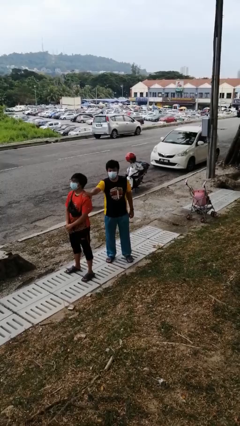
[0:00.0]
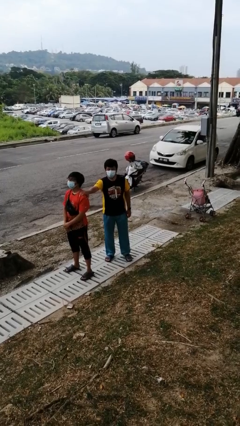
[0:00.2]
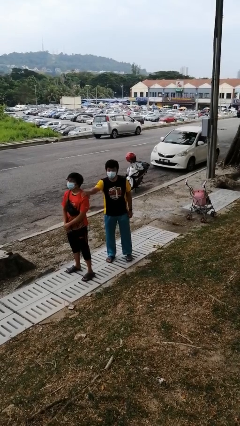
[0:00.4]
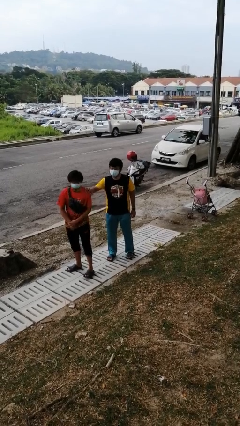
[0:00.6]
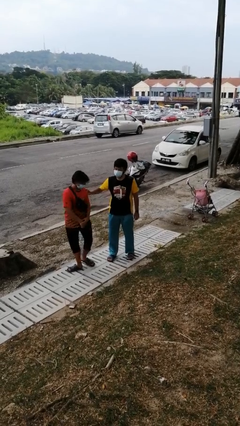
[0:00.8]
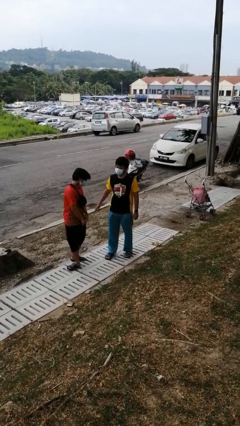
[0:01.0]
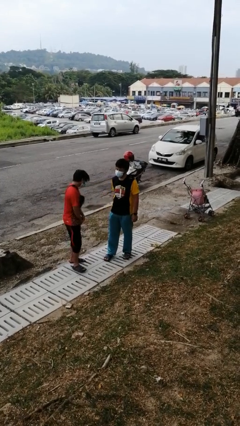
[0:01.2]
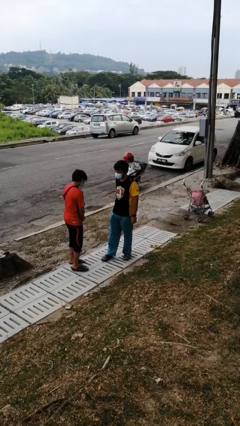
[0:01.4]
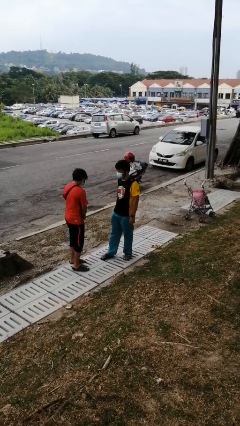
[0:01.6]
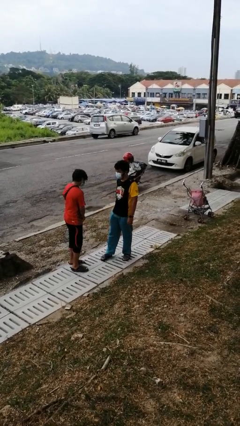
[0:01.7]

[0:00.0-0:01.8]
person spins person around

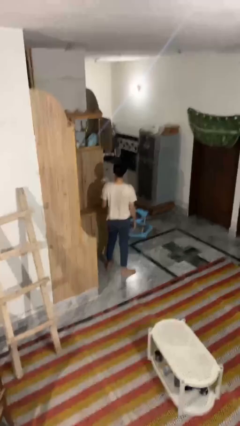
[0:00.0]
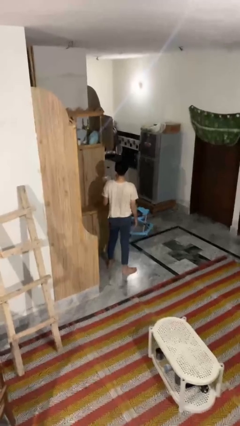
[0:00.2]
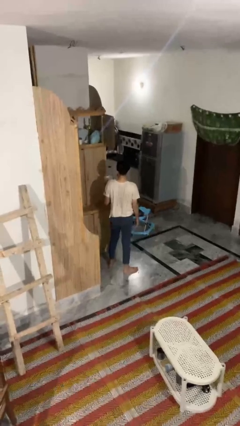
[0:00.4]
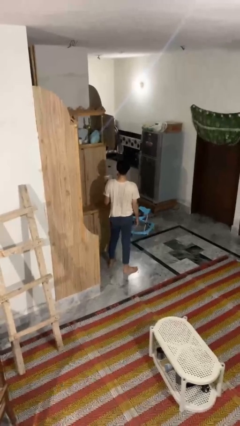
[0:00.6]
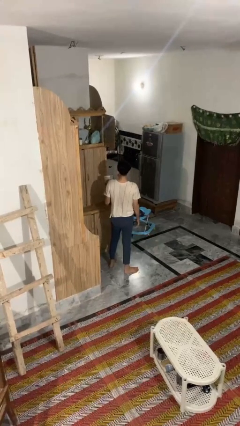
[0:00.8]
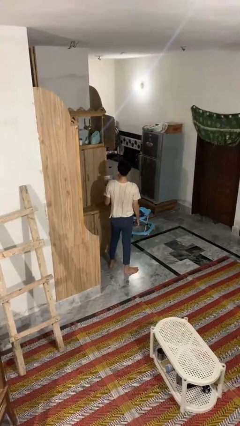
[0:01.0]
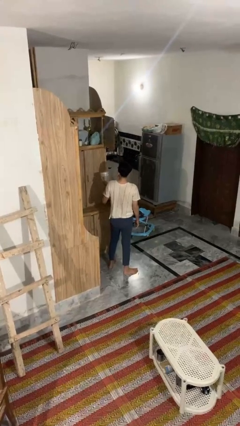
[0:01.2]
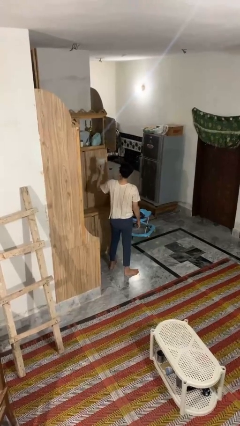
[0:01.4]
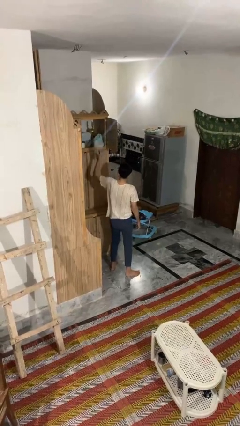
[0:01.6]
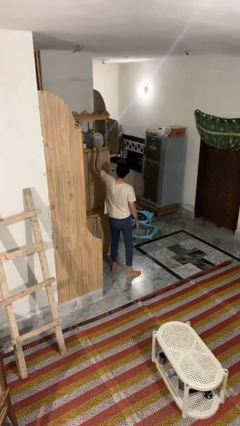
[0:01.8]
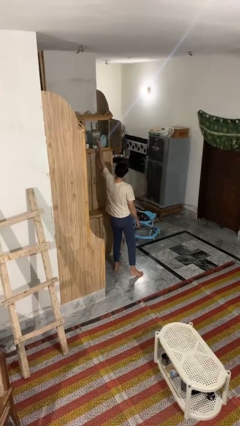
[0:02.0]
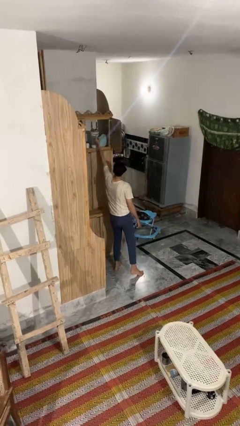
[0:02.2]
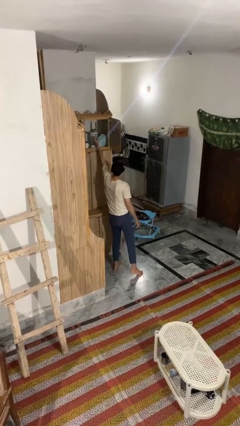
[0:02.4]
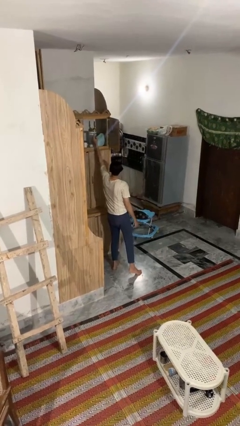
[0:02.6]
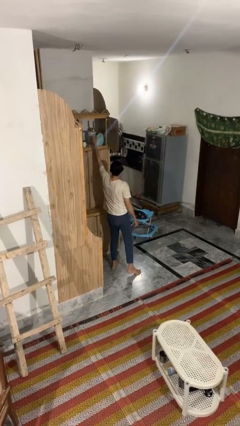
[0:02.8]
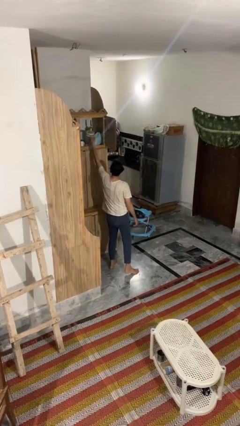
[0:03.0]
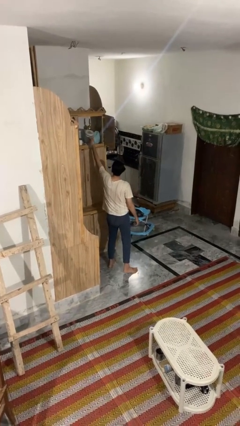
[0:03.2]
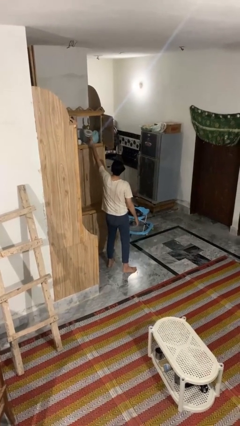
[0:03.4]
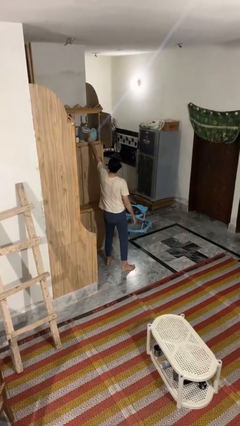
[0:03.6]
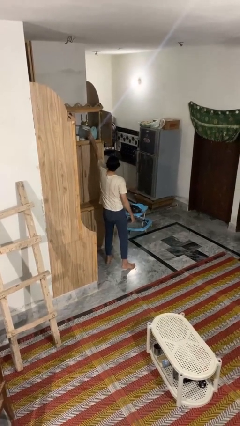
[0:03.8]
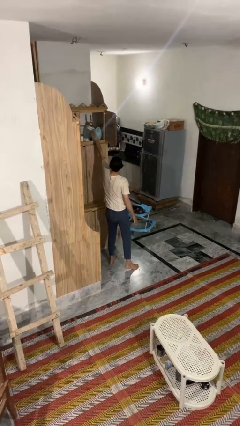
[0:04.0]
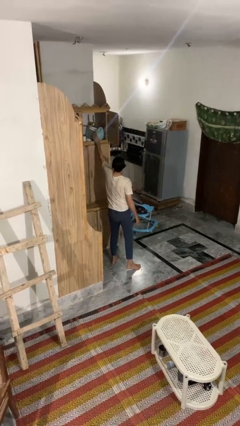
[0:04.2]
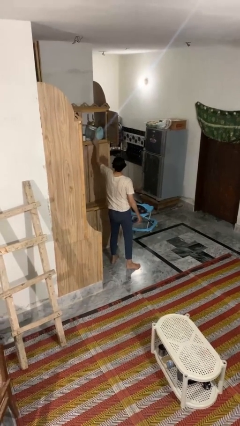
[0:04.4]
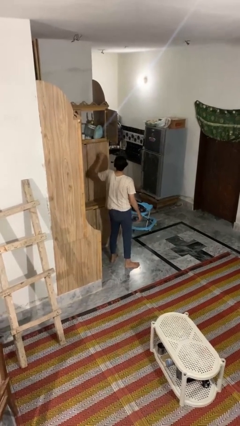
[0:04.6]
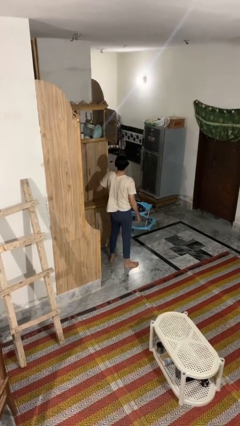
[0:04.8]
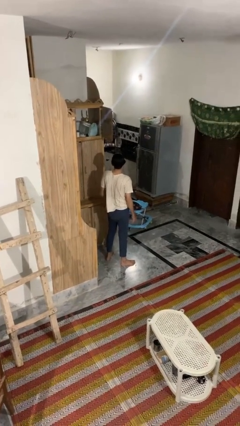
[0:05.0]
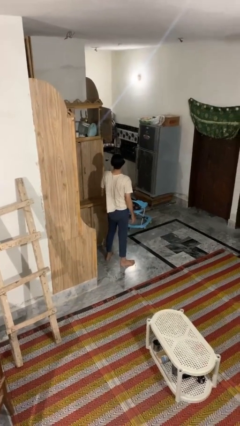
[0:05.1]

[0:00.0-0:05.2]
person puts down object on shelf

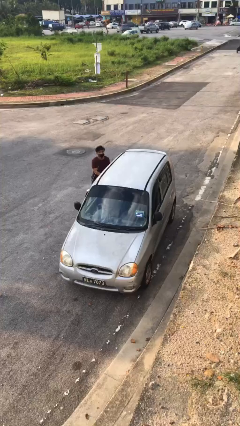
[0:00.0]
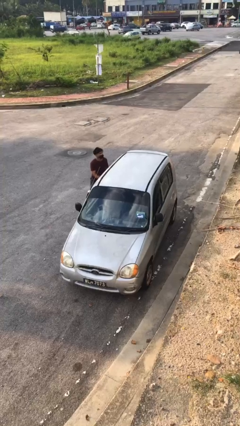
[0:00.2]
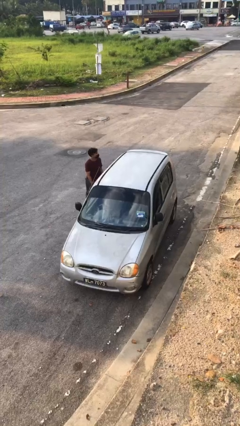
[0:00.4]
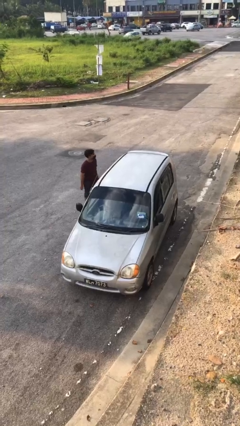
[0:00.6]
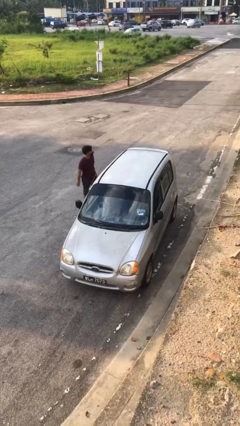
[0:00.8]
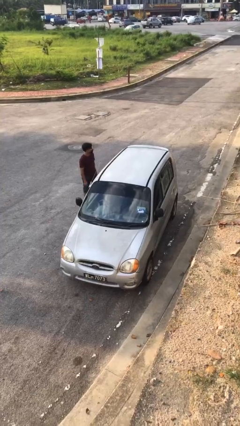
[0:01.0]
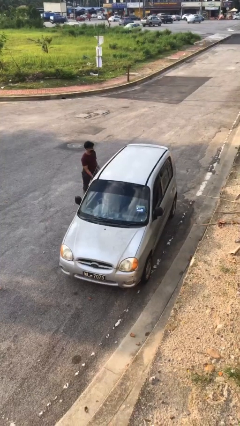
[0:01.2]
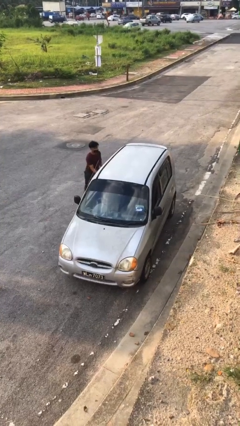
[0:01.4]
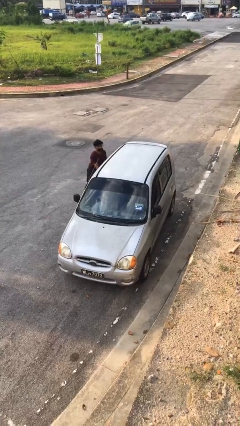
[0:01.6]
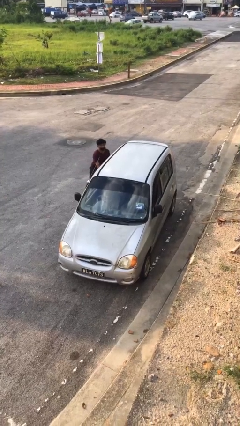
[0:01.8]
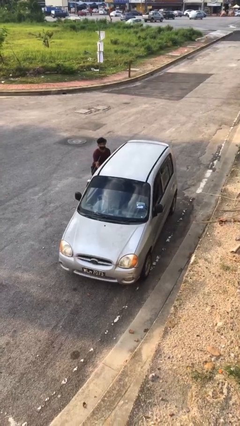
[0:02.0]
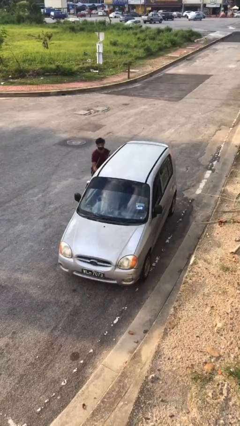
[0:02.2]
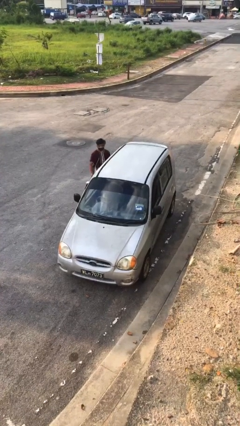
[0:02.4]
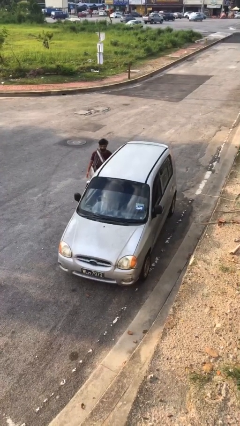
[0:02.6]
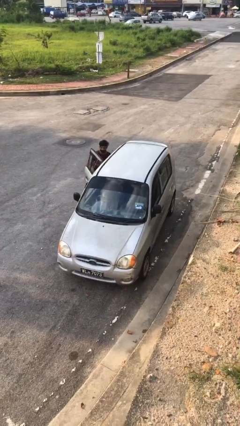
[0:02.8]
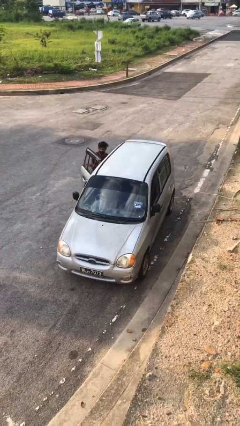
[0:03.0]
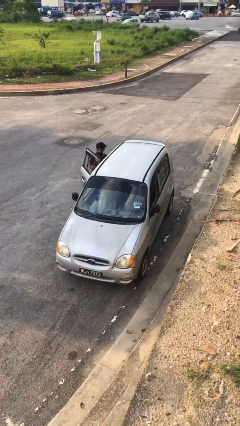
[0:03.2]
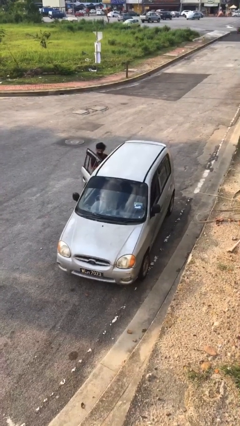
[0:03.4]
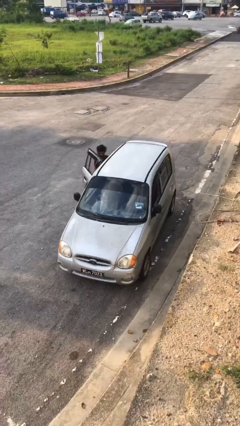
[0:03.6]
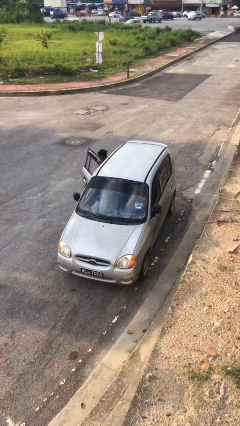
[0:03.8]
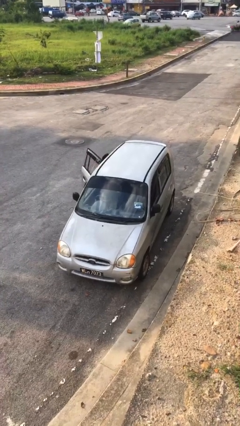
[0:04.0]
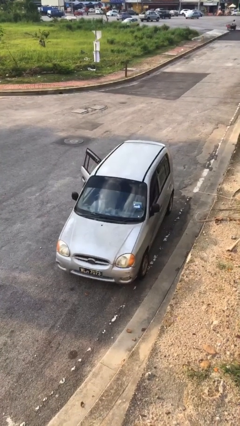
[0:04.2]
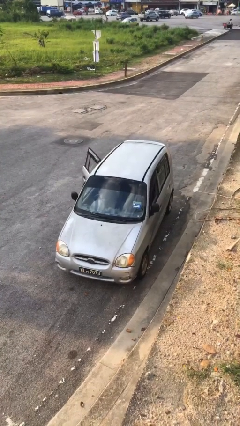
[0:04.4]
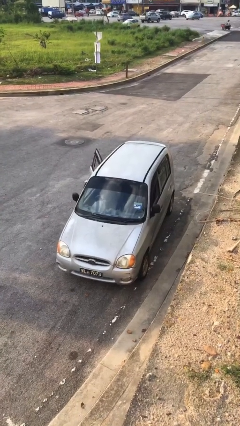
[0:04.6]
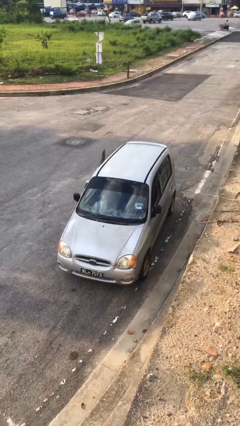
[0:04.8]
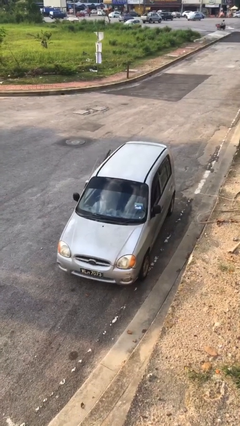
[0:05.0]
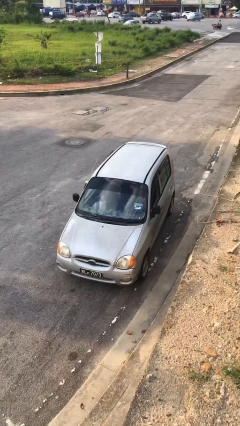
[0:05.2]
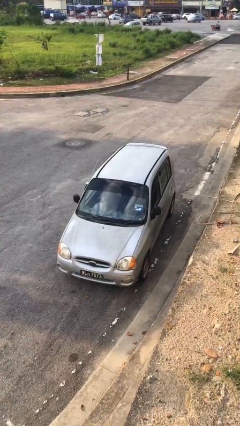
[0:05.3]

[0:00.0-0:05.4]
car picks up person

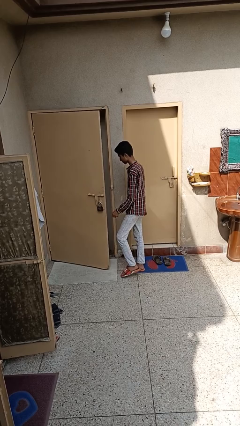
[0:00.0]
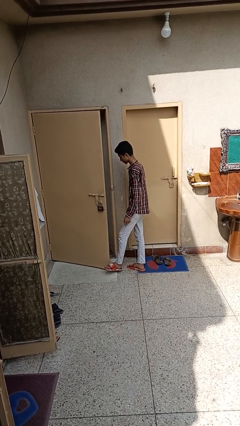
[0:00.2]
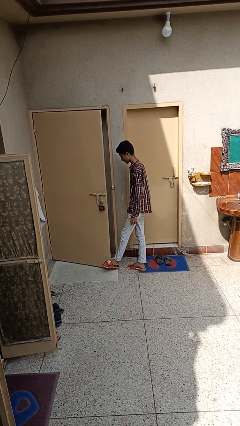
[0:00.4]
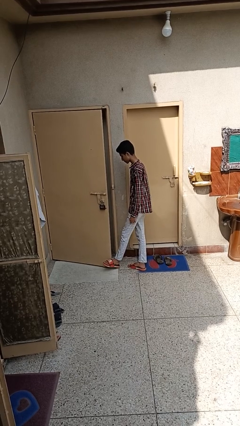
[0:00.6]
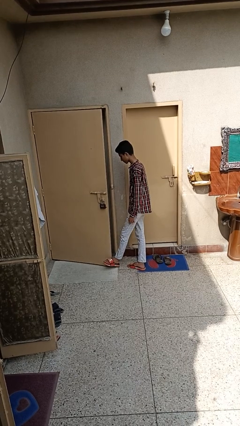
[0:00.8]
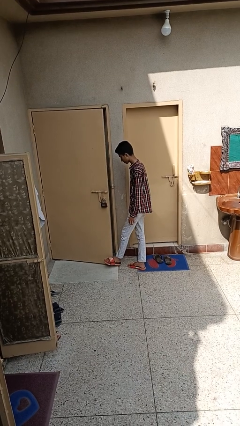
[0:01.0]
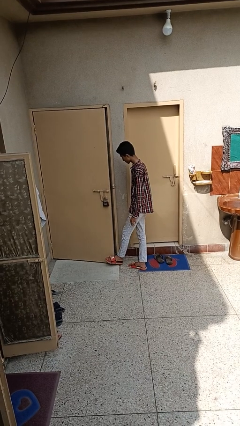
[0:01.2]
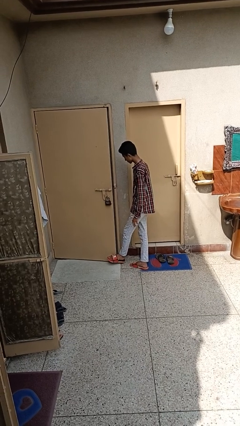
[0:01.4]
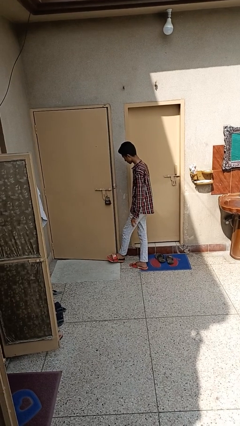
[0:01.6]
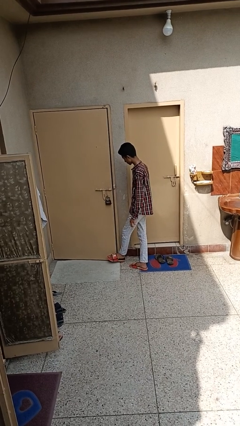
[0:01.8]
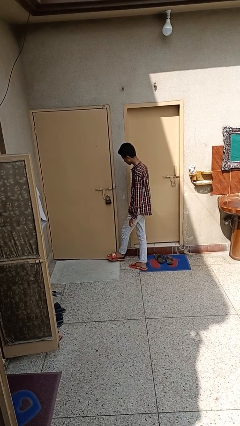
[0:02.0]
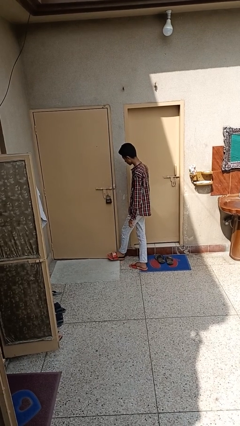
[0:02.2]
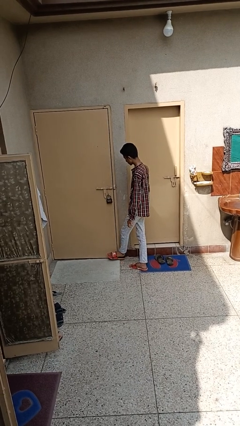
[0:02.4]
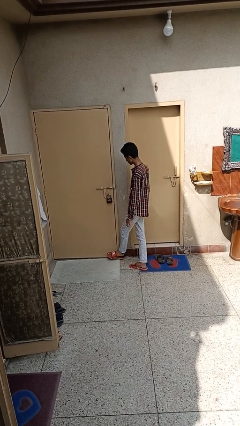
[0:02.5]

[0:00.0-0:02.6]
person closes door with foot

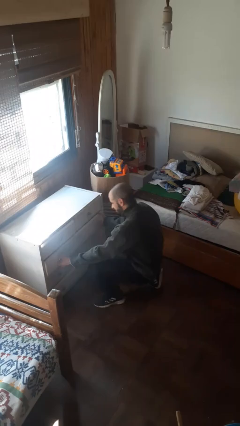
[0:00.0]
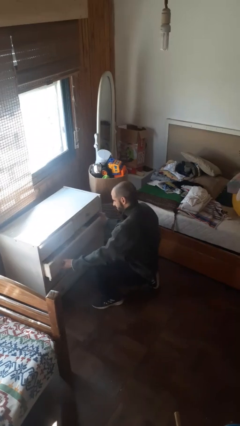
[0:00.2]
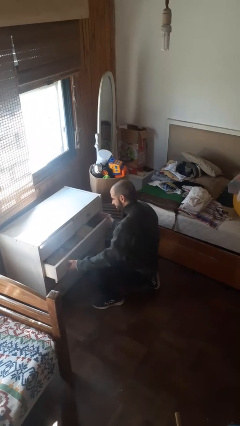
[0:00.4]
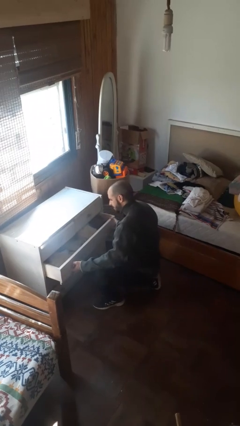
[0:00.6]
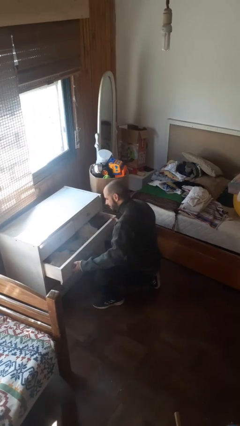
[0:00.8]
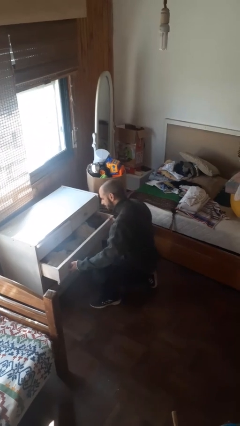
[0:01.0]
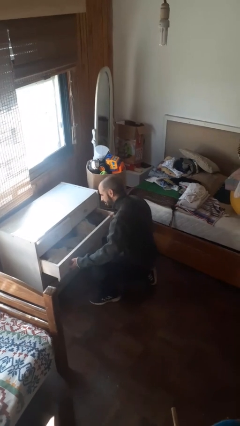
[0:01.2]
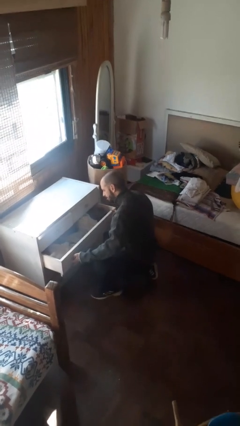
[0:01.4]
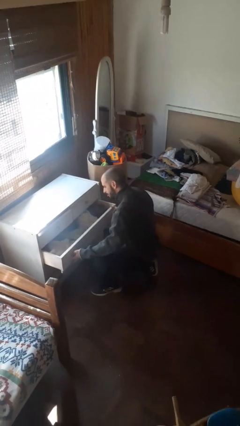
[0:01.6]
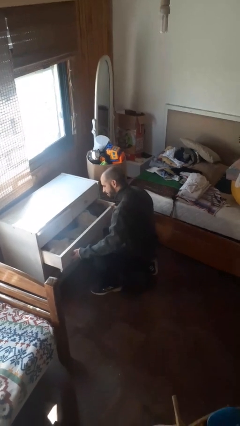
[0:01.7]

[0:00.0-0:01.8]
person opens dresser drawer

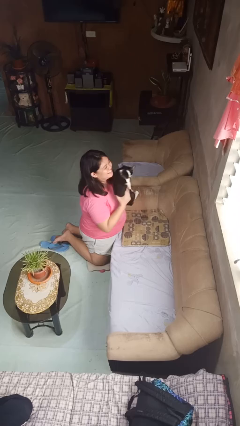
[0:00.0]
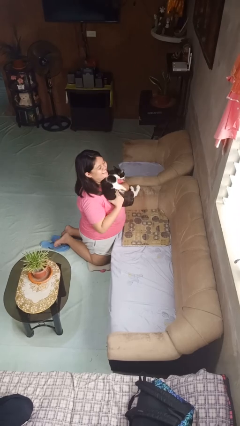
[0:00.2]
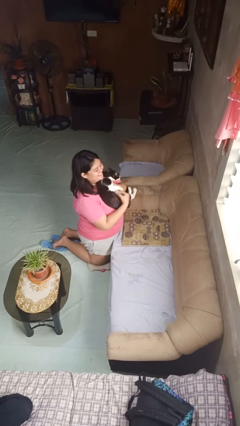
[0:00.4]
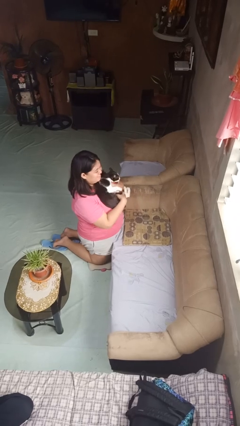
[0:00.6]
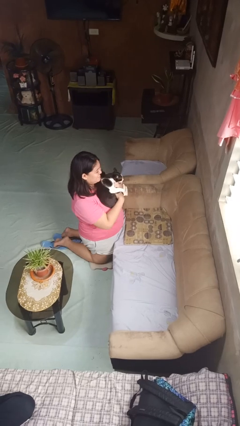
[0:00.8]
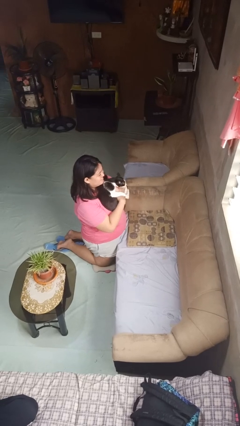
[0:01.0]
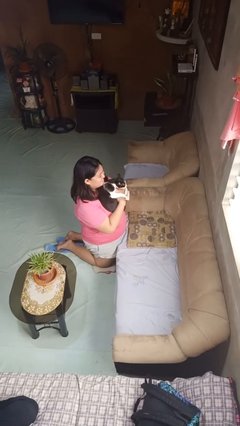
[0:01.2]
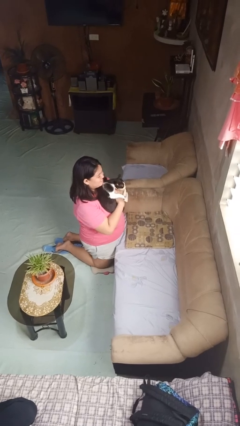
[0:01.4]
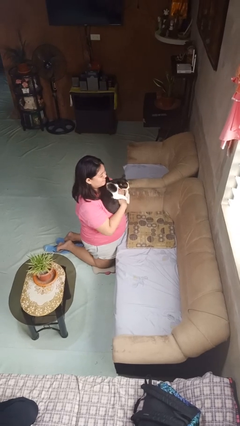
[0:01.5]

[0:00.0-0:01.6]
person hugs cat
